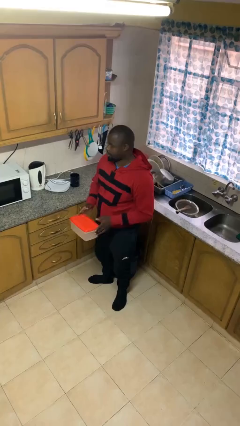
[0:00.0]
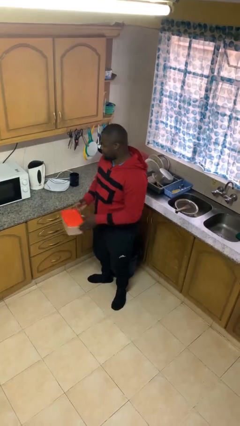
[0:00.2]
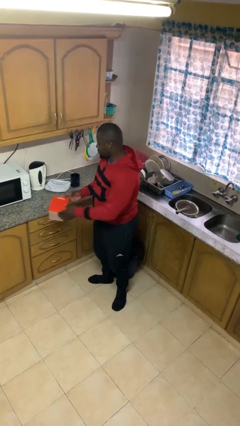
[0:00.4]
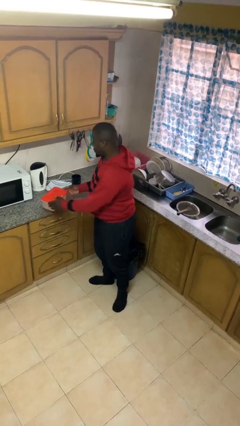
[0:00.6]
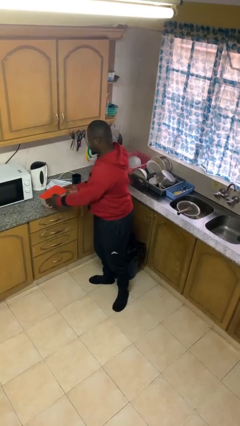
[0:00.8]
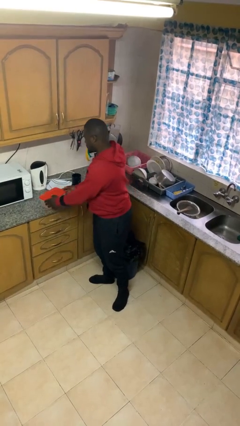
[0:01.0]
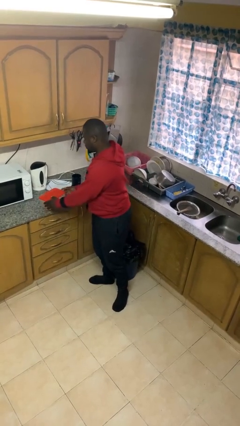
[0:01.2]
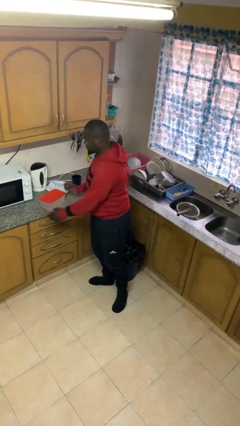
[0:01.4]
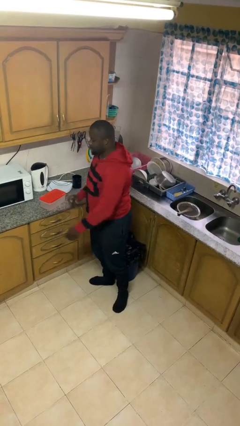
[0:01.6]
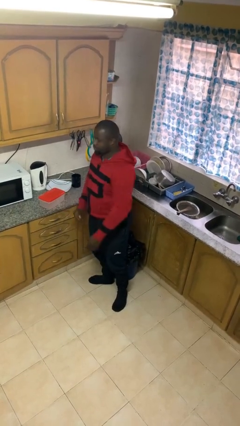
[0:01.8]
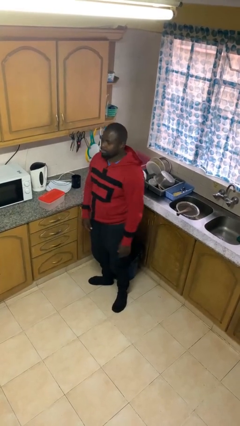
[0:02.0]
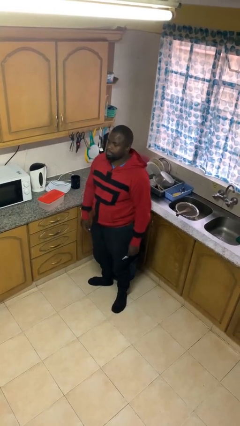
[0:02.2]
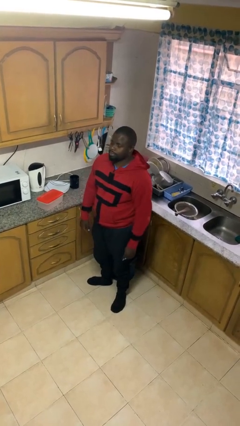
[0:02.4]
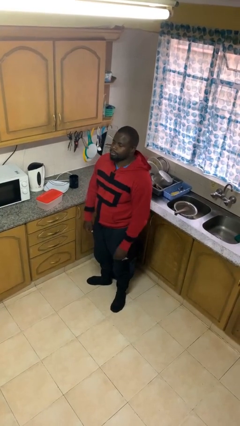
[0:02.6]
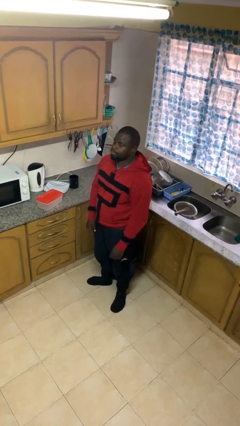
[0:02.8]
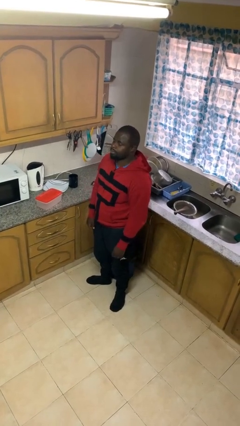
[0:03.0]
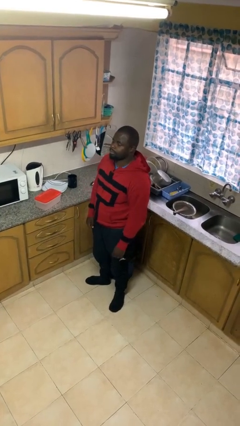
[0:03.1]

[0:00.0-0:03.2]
person puts down object on countertop

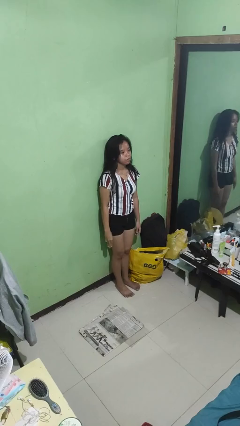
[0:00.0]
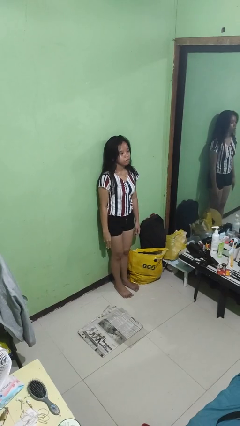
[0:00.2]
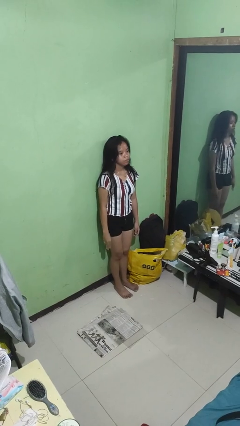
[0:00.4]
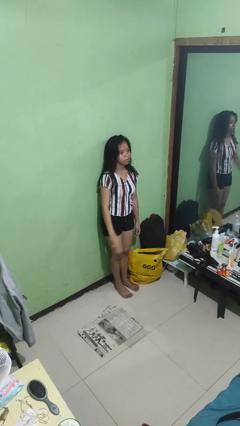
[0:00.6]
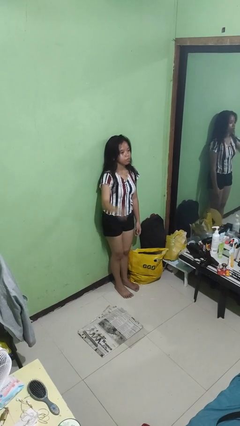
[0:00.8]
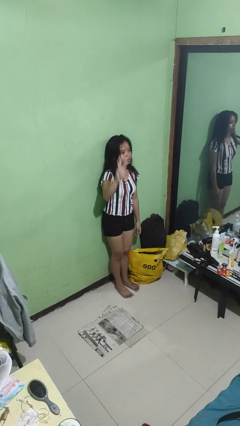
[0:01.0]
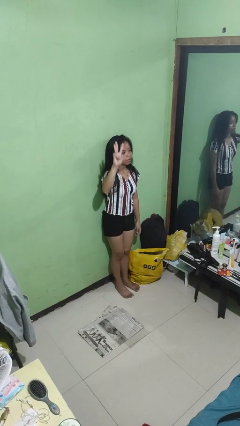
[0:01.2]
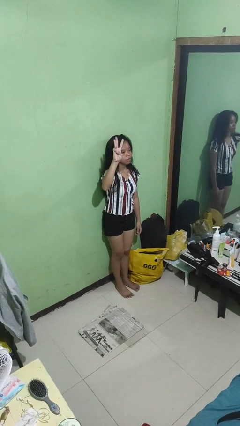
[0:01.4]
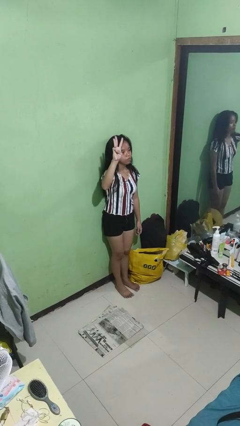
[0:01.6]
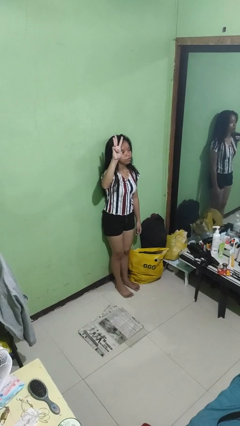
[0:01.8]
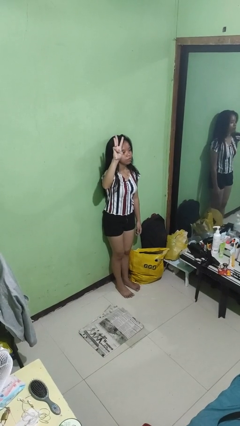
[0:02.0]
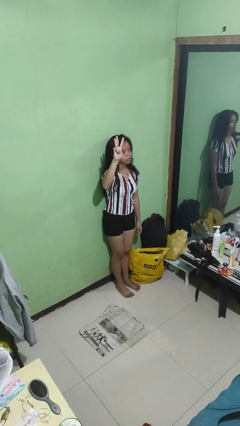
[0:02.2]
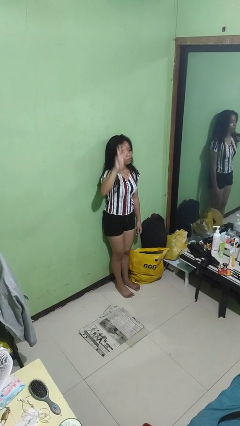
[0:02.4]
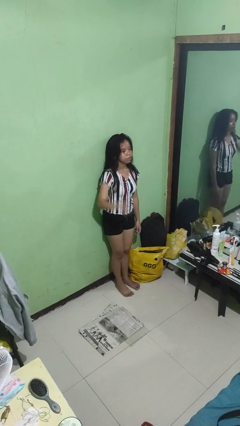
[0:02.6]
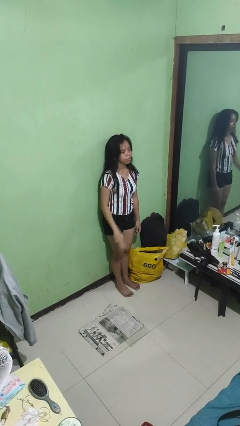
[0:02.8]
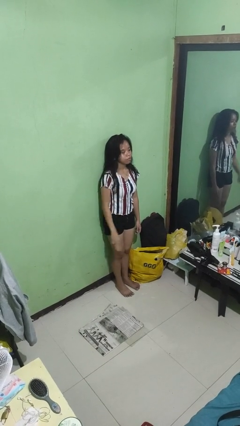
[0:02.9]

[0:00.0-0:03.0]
person gestures number three

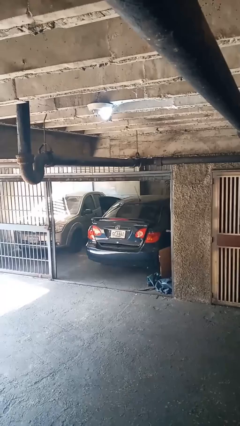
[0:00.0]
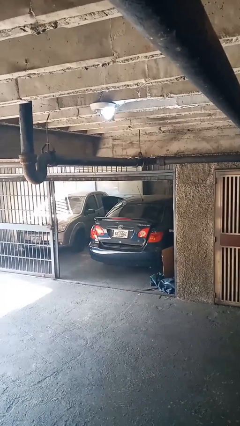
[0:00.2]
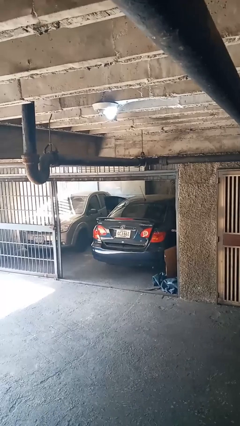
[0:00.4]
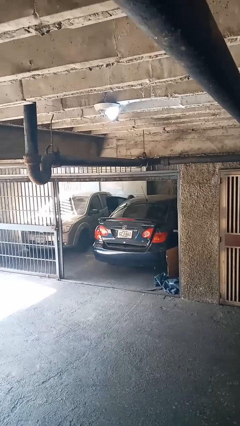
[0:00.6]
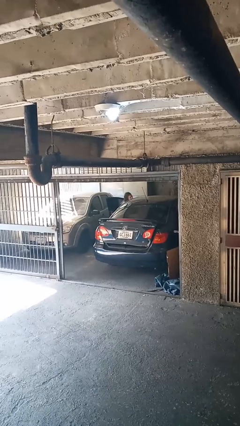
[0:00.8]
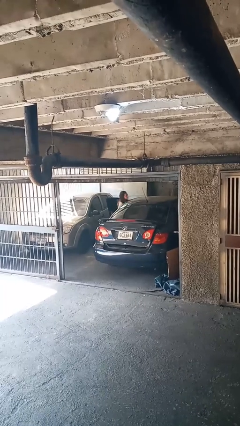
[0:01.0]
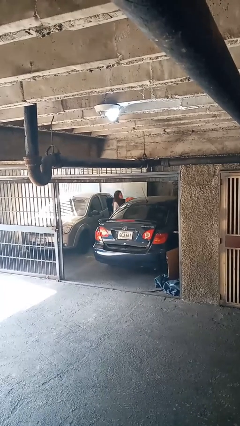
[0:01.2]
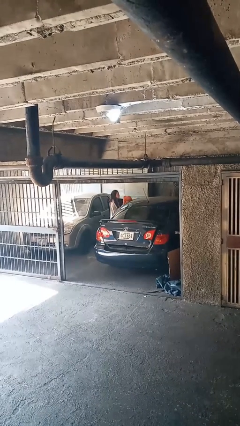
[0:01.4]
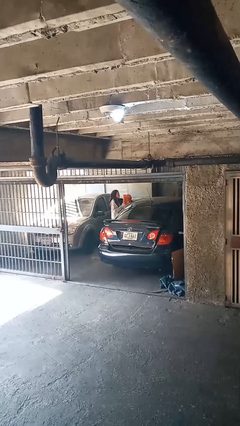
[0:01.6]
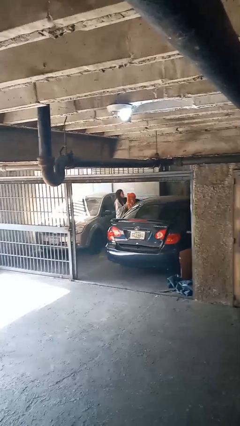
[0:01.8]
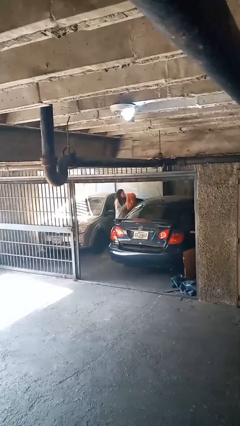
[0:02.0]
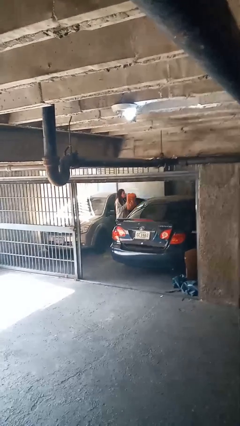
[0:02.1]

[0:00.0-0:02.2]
person unloads car

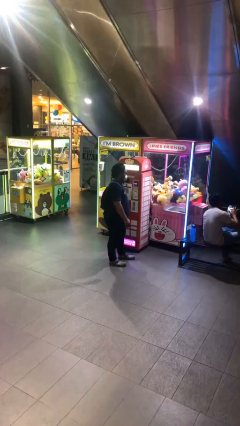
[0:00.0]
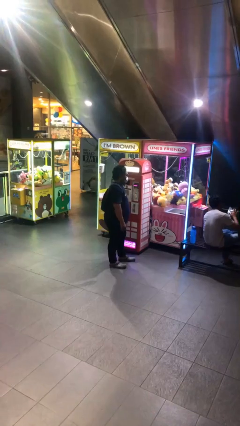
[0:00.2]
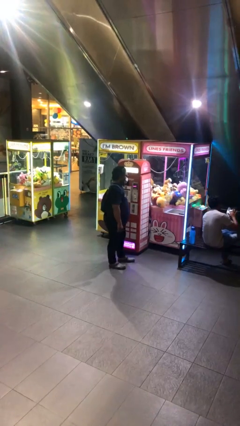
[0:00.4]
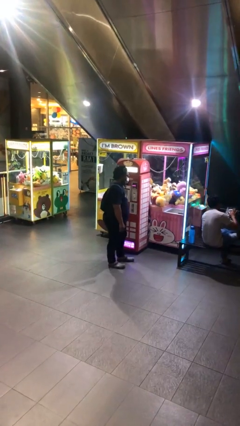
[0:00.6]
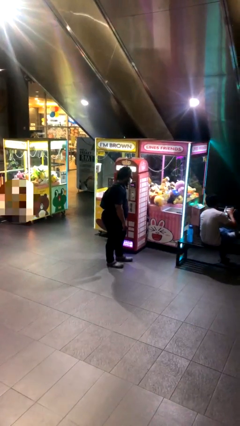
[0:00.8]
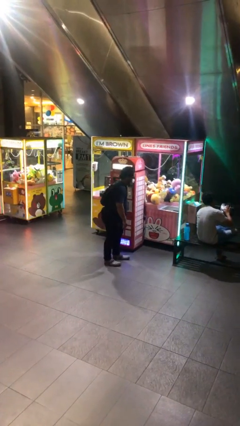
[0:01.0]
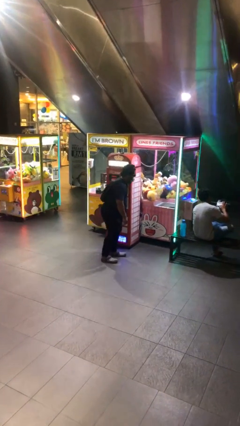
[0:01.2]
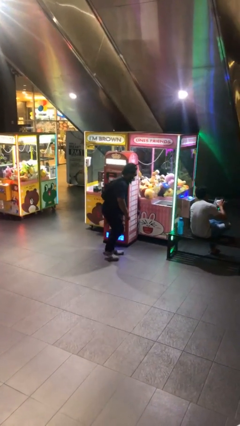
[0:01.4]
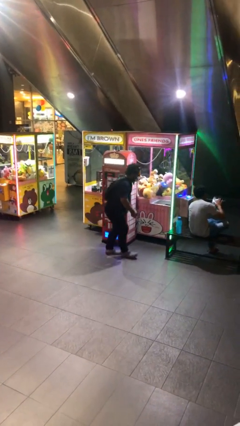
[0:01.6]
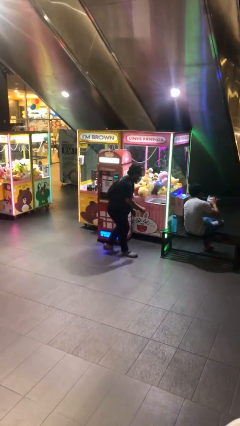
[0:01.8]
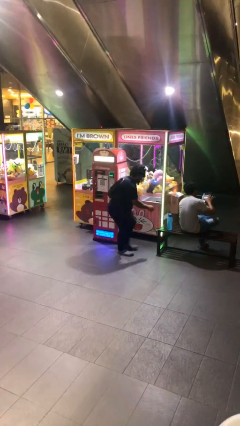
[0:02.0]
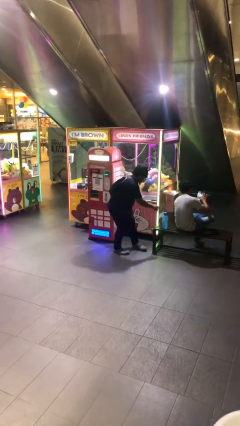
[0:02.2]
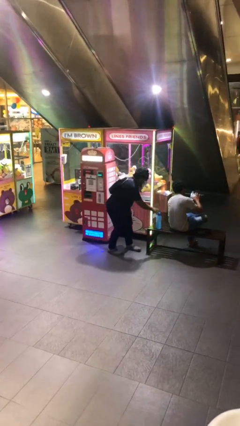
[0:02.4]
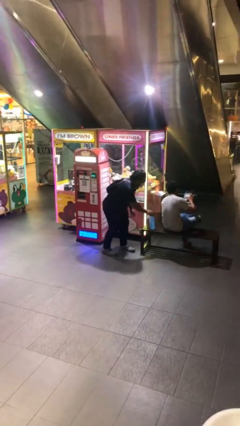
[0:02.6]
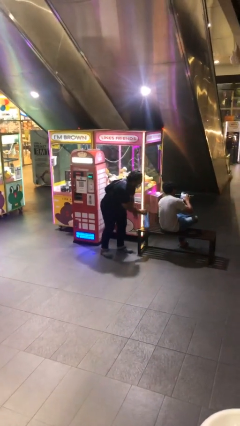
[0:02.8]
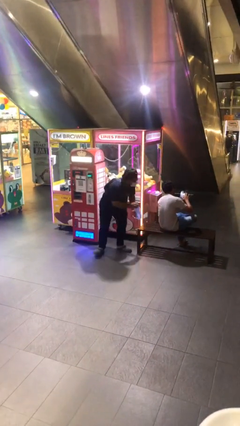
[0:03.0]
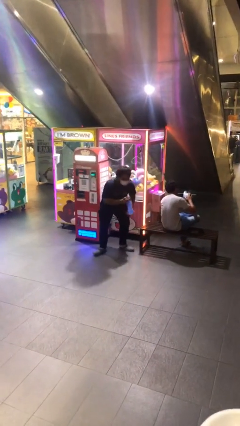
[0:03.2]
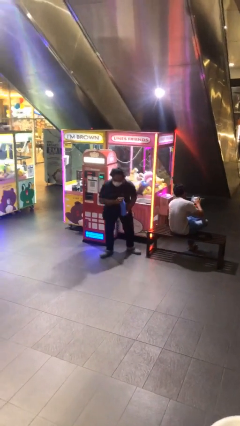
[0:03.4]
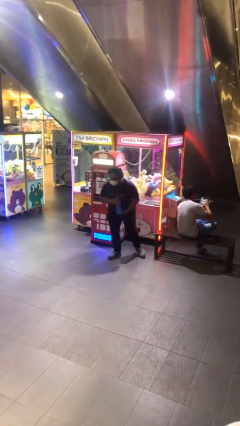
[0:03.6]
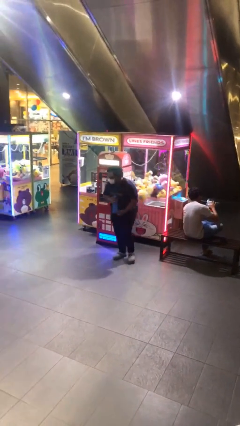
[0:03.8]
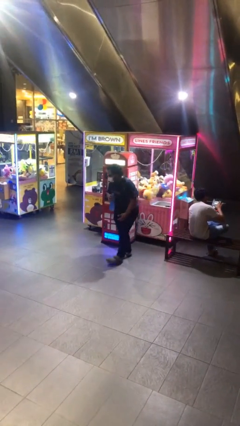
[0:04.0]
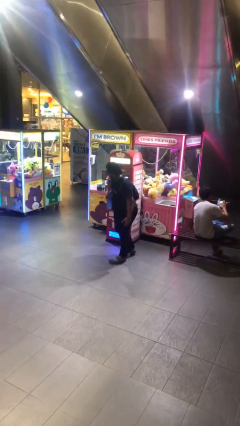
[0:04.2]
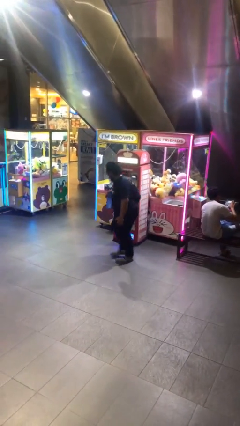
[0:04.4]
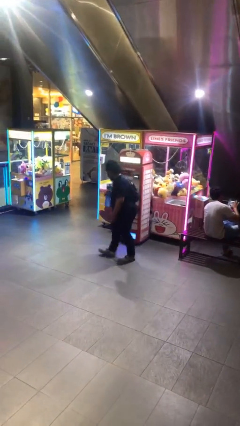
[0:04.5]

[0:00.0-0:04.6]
person steals object from person

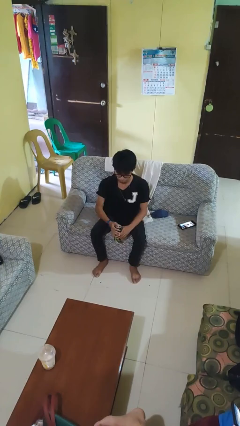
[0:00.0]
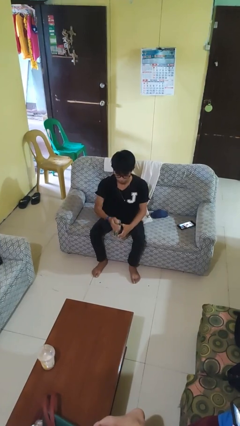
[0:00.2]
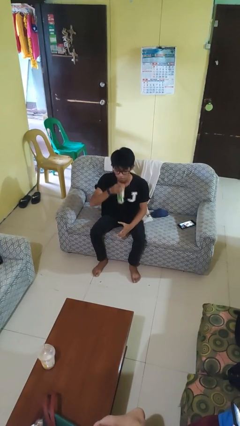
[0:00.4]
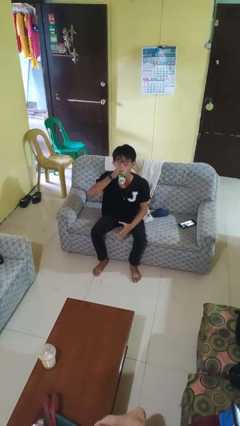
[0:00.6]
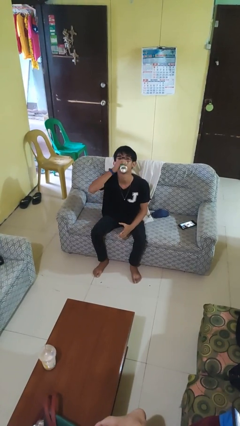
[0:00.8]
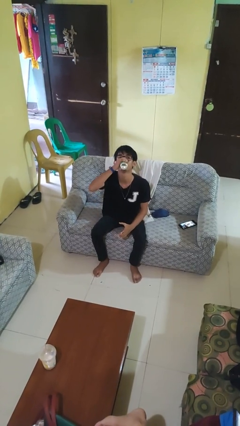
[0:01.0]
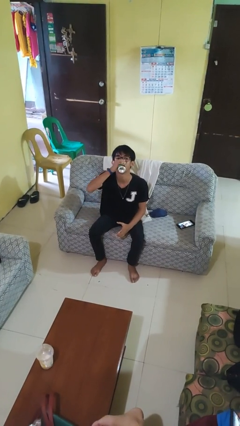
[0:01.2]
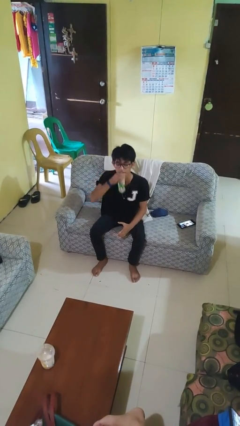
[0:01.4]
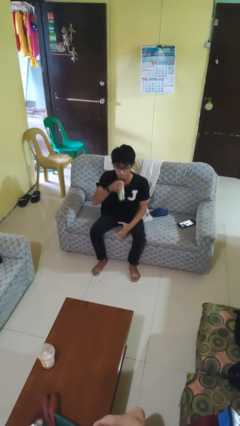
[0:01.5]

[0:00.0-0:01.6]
person drinks from beverage can

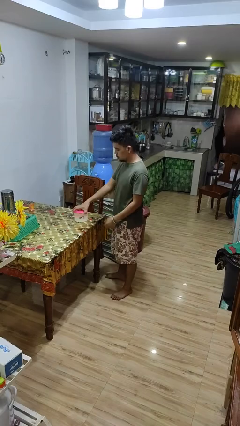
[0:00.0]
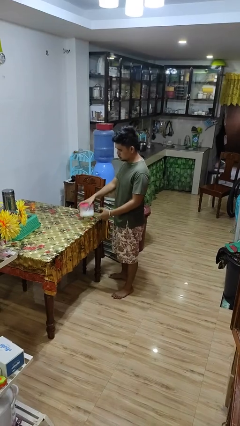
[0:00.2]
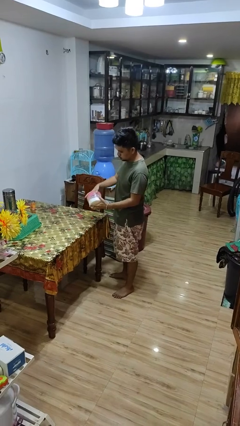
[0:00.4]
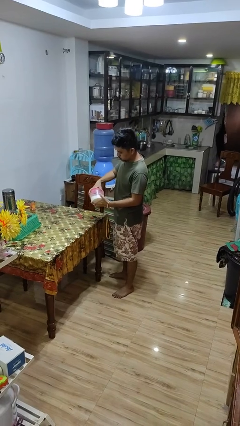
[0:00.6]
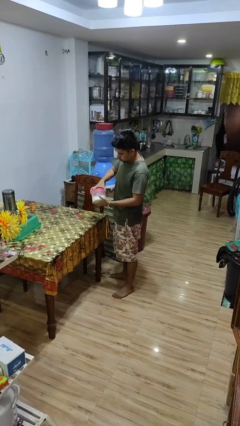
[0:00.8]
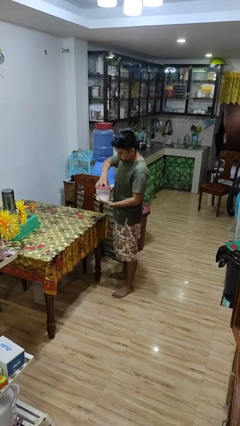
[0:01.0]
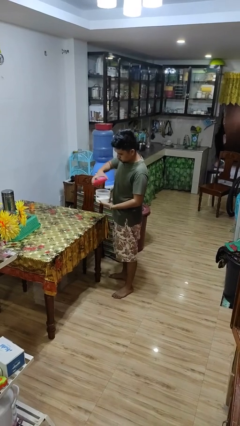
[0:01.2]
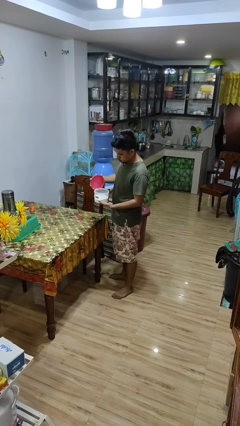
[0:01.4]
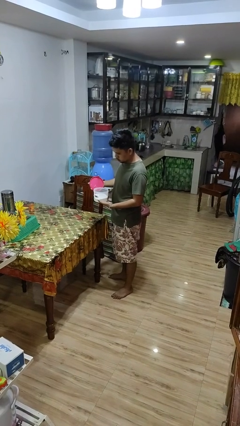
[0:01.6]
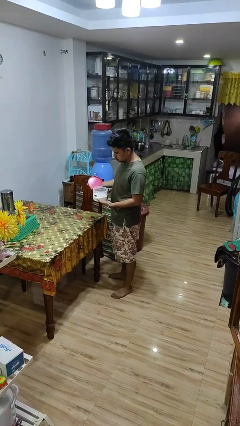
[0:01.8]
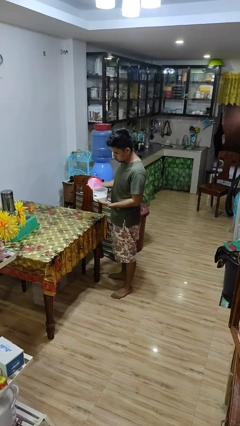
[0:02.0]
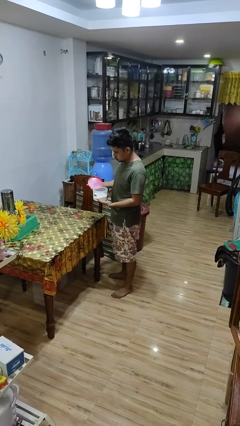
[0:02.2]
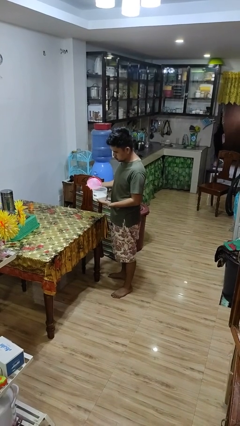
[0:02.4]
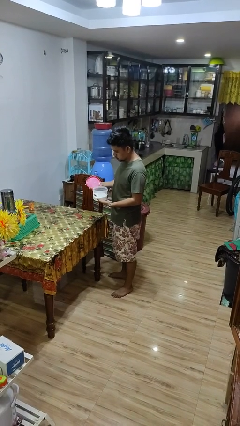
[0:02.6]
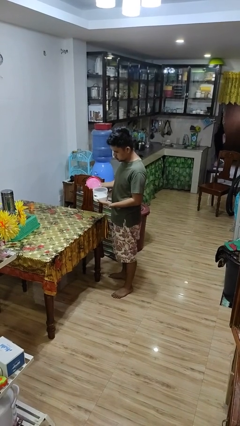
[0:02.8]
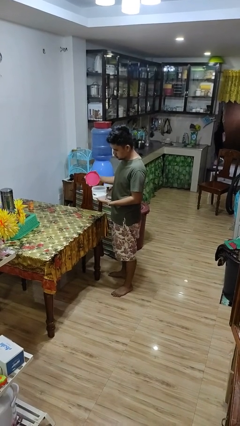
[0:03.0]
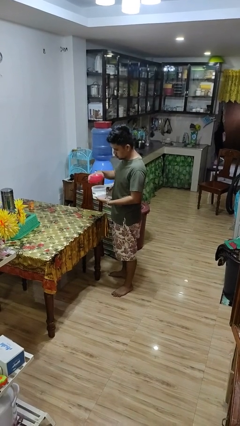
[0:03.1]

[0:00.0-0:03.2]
person opens jar
